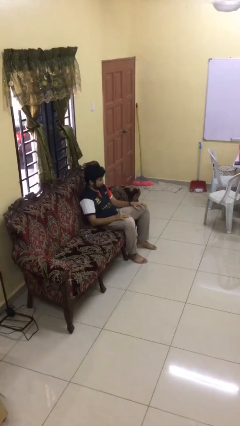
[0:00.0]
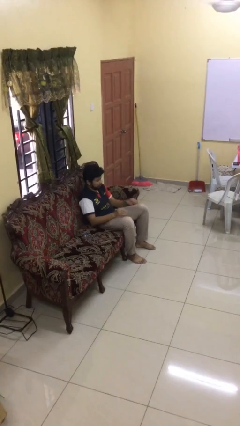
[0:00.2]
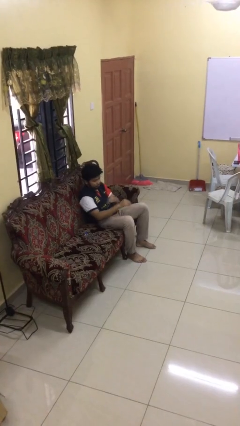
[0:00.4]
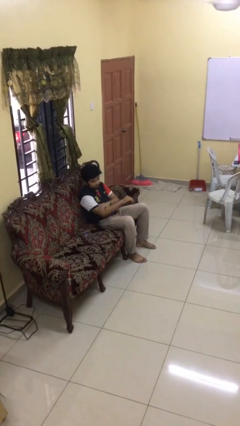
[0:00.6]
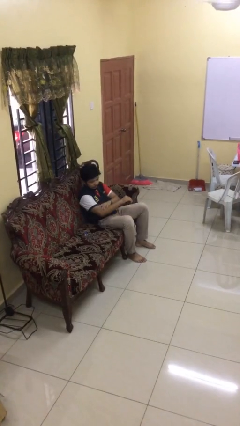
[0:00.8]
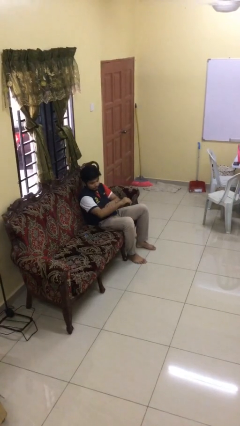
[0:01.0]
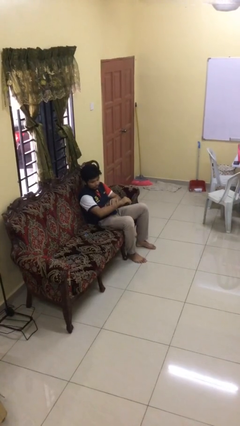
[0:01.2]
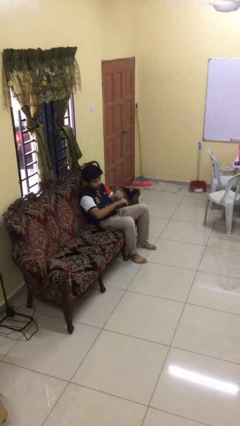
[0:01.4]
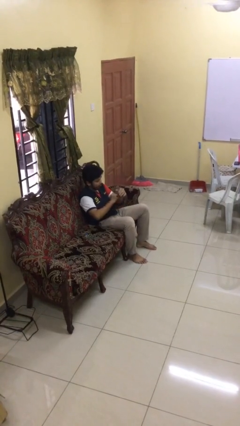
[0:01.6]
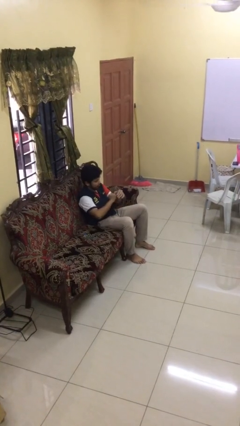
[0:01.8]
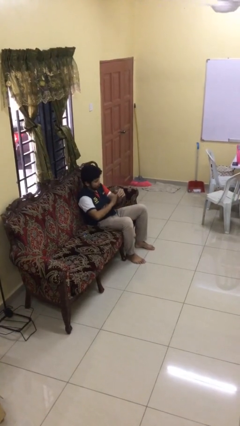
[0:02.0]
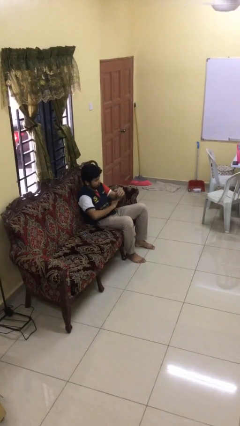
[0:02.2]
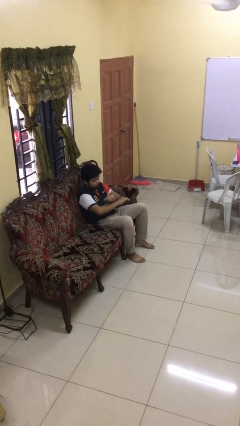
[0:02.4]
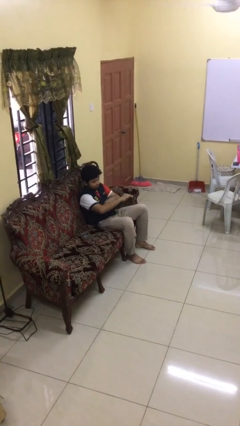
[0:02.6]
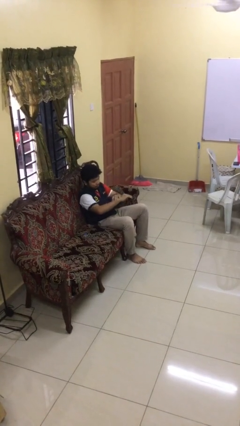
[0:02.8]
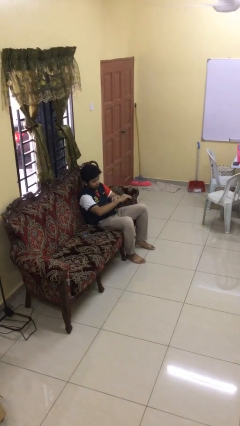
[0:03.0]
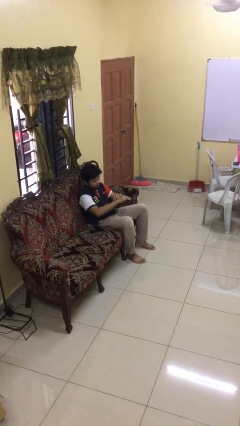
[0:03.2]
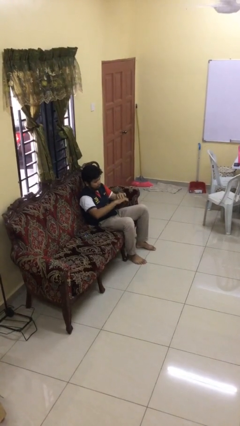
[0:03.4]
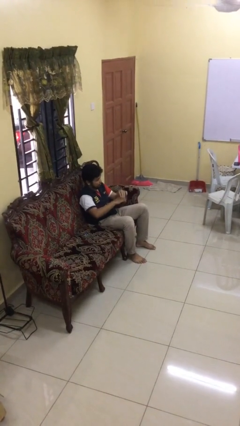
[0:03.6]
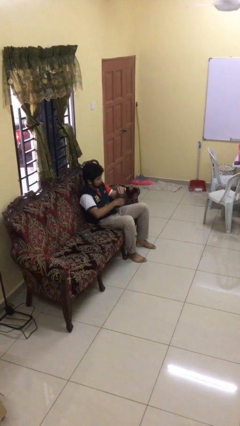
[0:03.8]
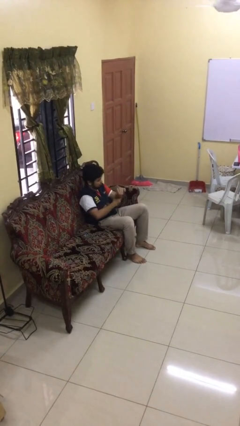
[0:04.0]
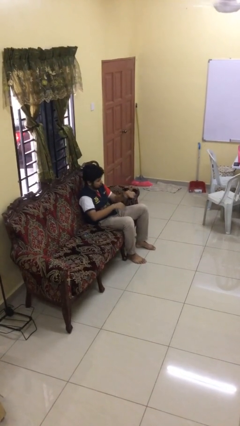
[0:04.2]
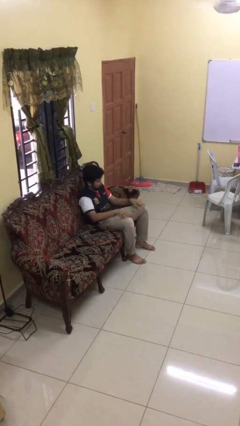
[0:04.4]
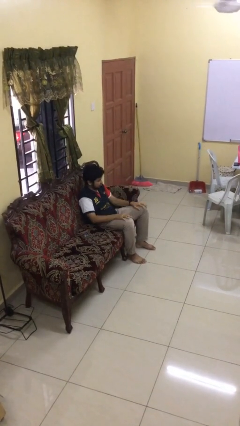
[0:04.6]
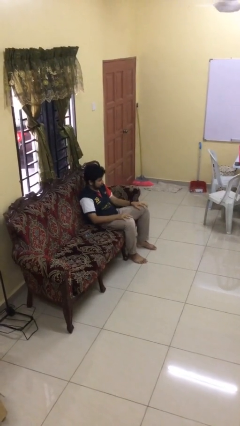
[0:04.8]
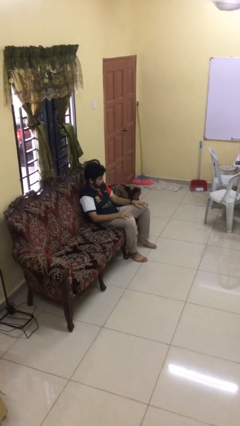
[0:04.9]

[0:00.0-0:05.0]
person looks at hands in lap

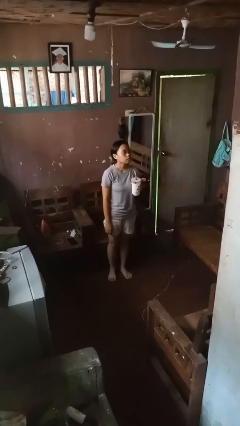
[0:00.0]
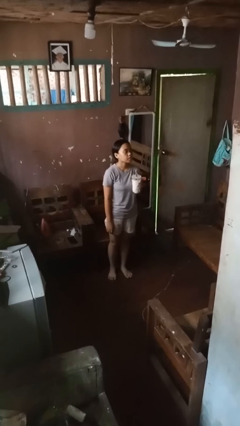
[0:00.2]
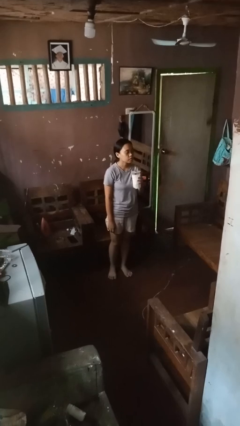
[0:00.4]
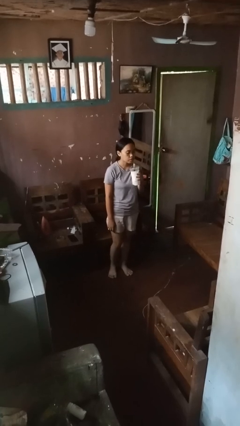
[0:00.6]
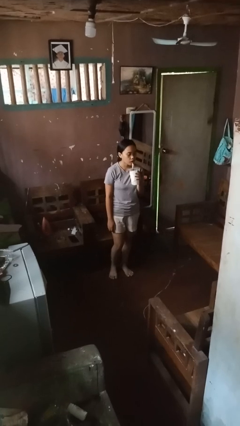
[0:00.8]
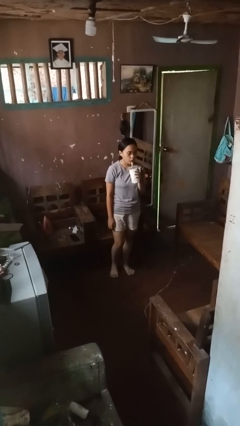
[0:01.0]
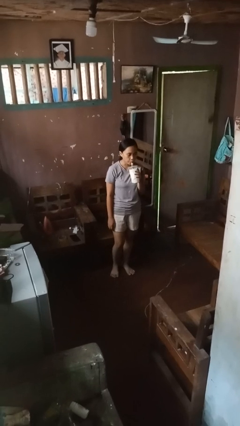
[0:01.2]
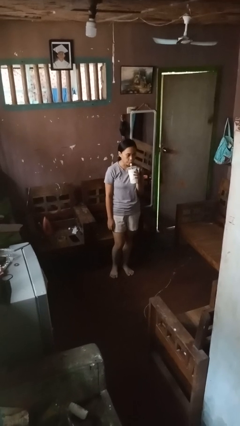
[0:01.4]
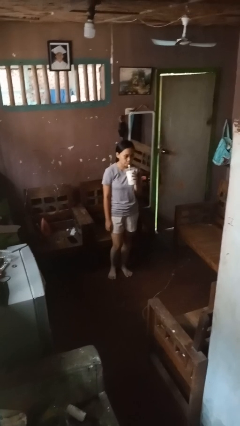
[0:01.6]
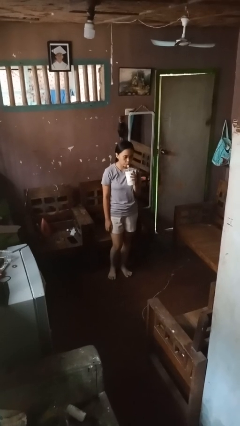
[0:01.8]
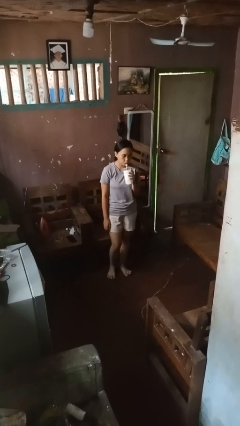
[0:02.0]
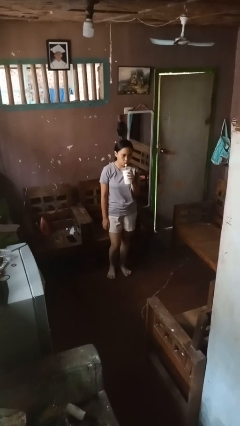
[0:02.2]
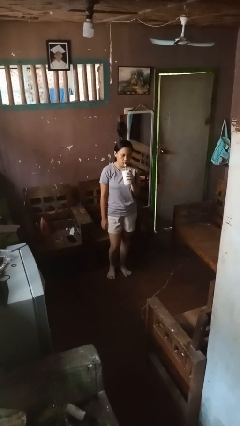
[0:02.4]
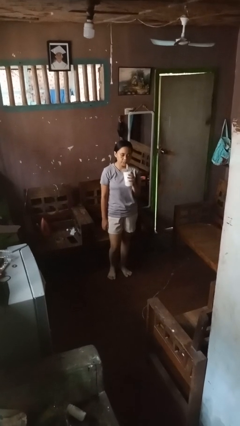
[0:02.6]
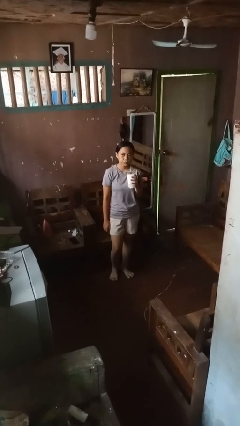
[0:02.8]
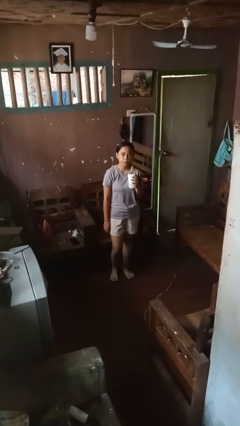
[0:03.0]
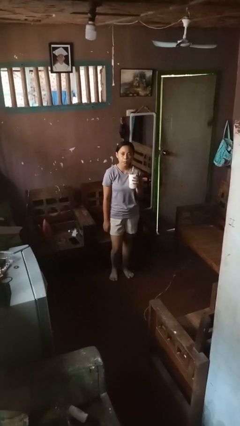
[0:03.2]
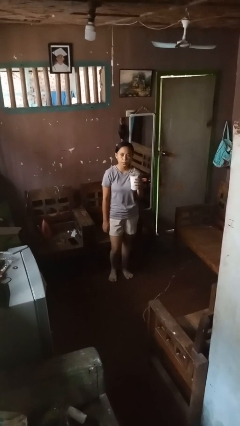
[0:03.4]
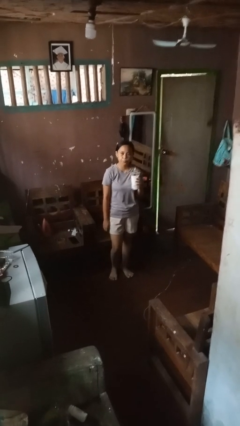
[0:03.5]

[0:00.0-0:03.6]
person drinks from straw

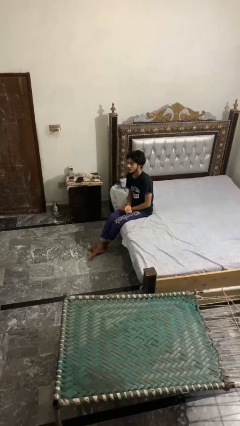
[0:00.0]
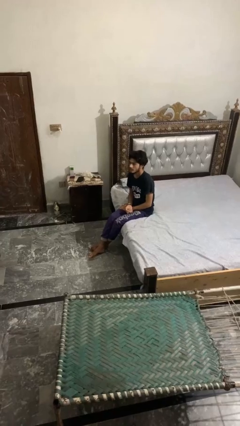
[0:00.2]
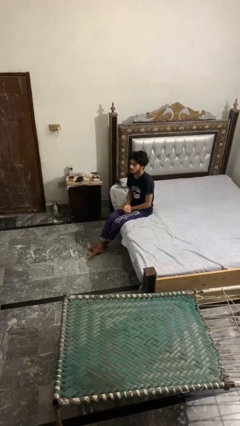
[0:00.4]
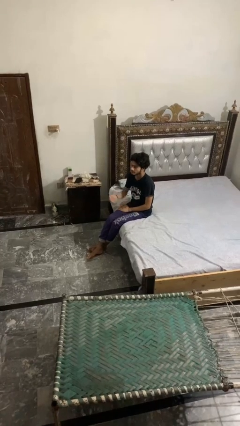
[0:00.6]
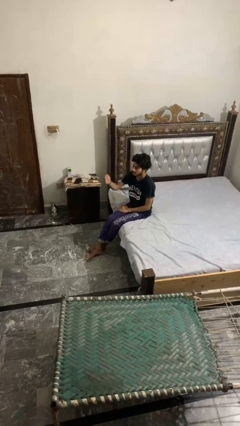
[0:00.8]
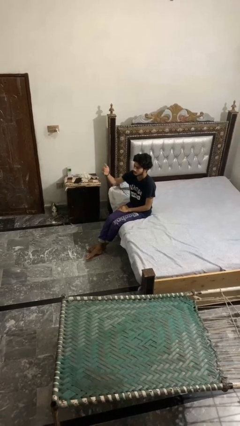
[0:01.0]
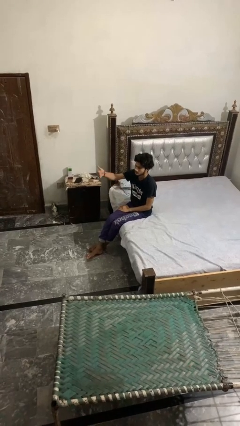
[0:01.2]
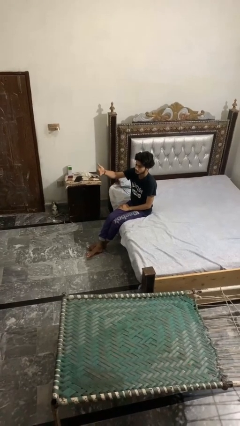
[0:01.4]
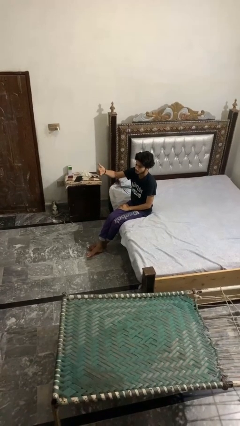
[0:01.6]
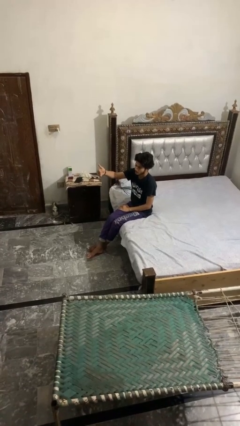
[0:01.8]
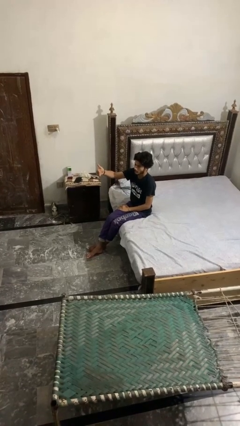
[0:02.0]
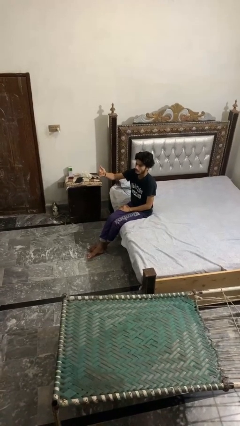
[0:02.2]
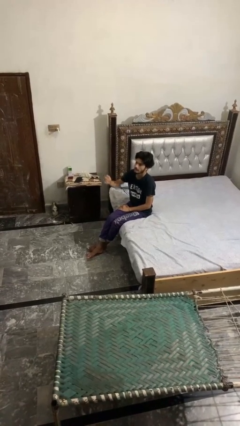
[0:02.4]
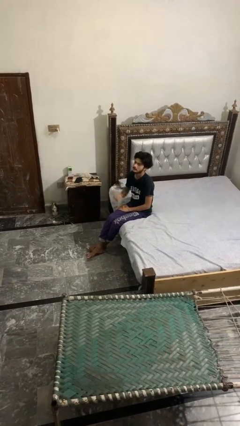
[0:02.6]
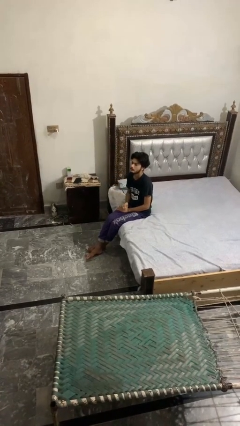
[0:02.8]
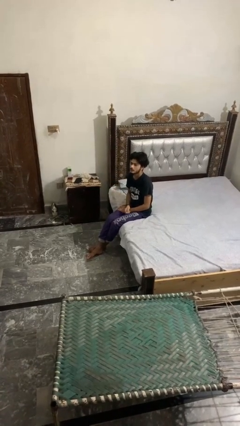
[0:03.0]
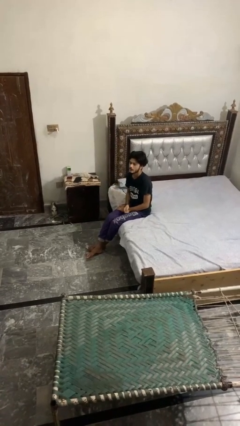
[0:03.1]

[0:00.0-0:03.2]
person gestures thumbs up

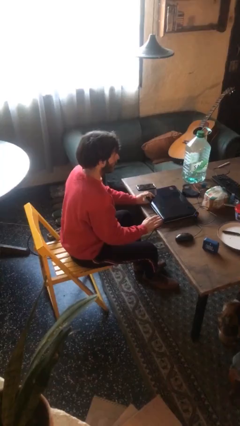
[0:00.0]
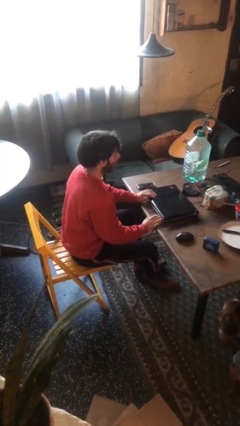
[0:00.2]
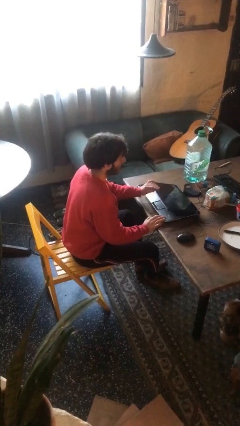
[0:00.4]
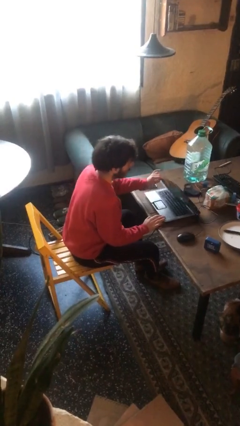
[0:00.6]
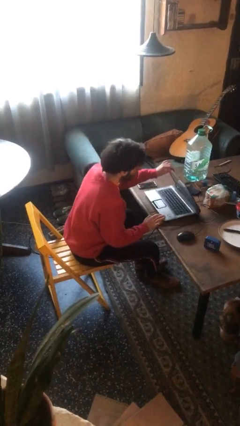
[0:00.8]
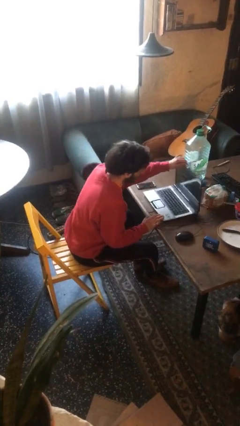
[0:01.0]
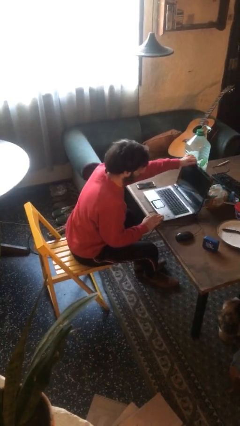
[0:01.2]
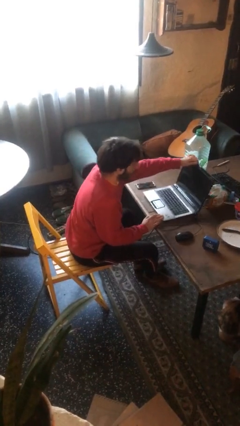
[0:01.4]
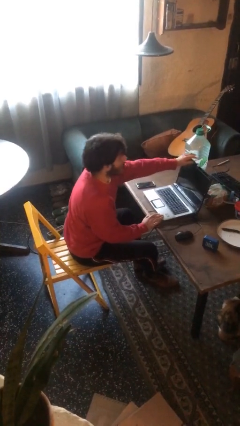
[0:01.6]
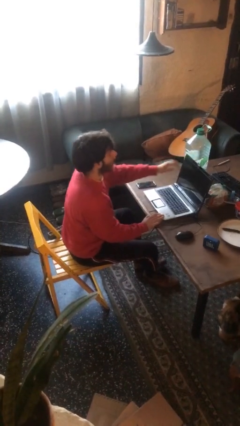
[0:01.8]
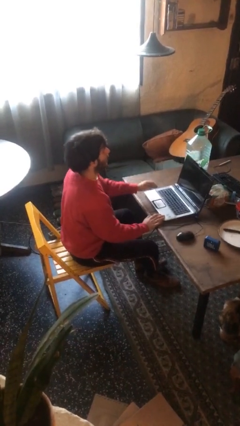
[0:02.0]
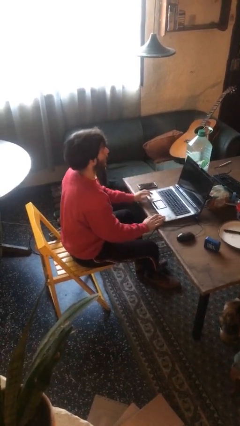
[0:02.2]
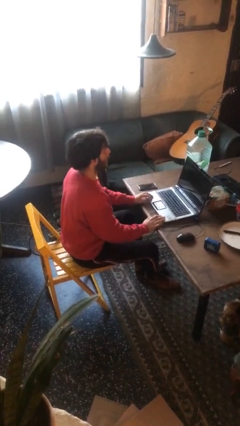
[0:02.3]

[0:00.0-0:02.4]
person opens laptop

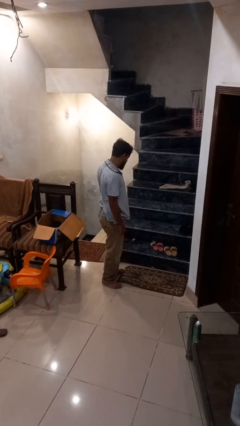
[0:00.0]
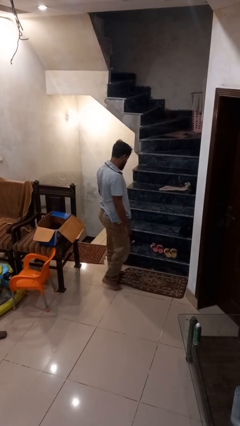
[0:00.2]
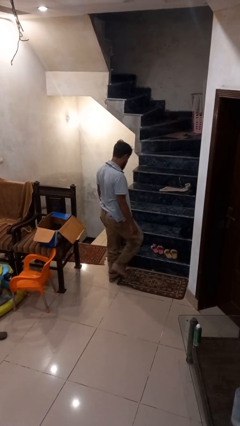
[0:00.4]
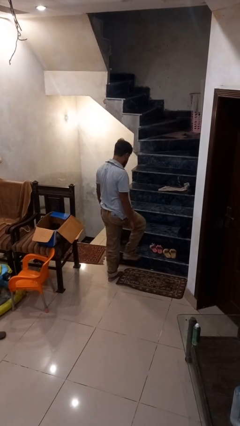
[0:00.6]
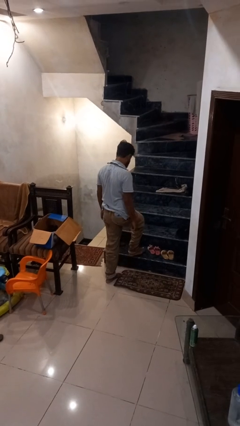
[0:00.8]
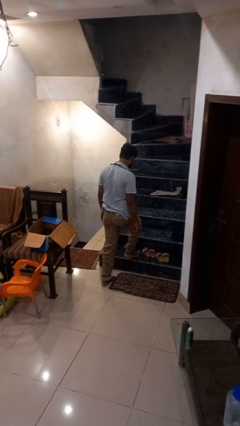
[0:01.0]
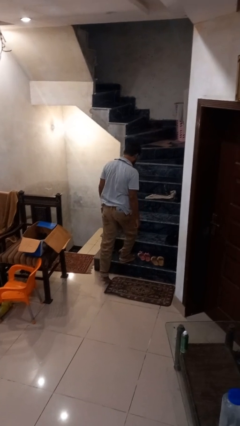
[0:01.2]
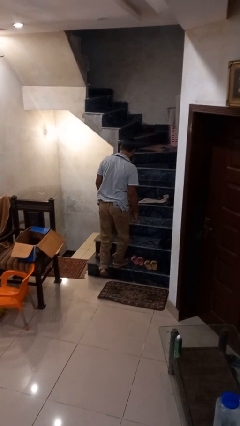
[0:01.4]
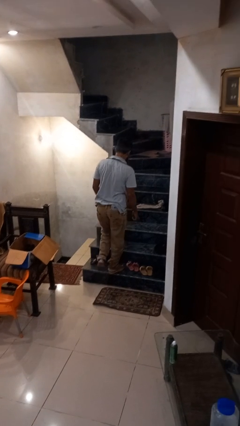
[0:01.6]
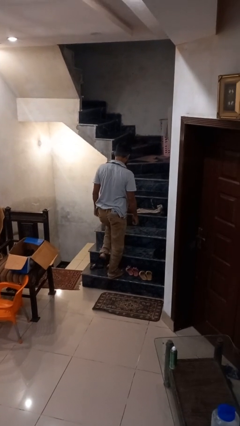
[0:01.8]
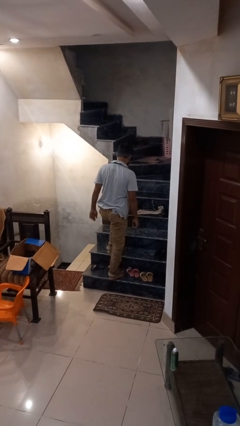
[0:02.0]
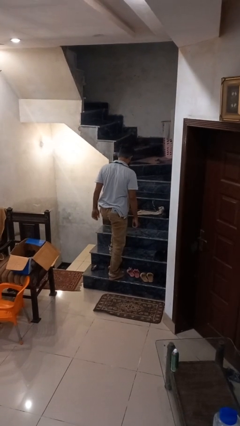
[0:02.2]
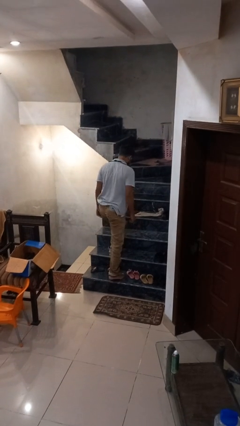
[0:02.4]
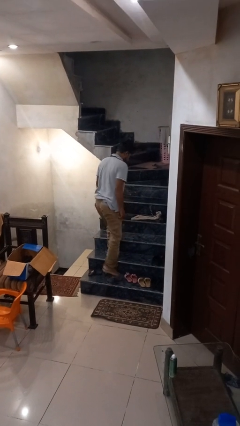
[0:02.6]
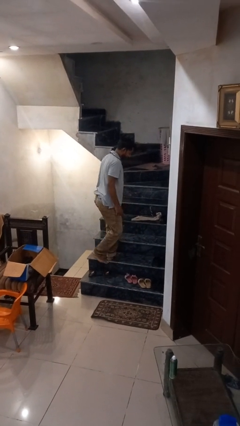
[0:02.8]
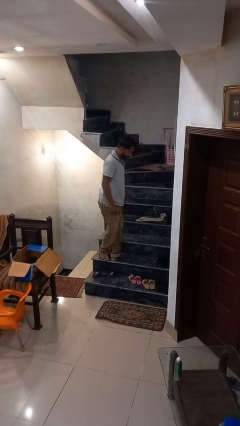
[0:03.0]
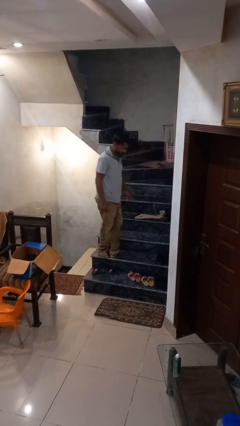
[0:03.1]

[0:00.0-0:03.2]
person climbs up stairs
